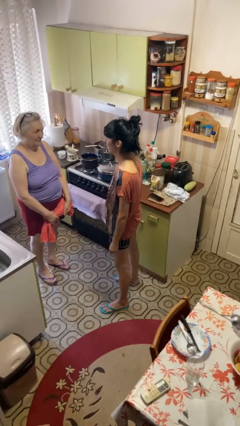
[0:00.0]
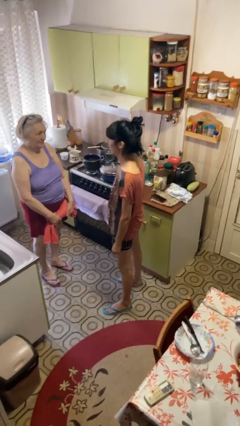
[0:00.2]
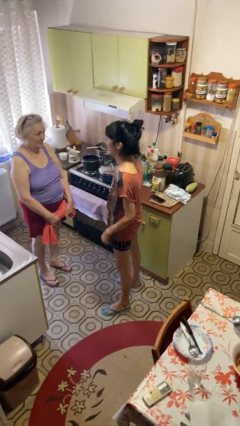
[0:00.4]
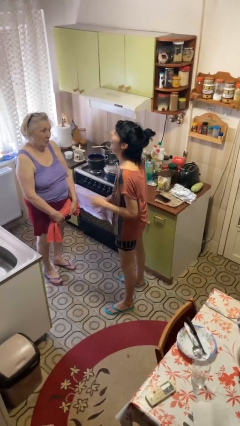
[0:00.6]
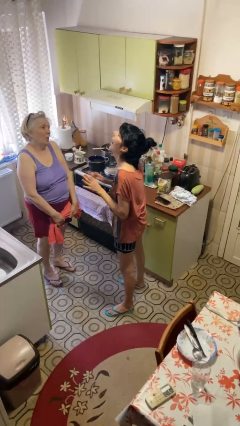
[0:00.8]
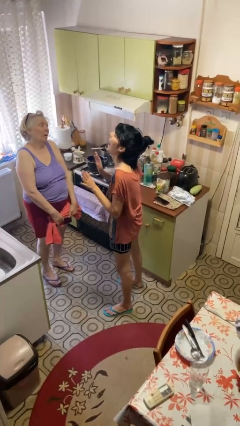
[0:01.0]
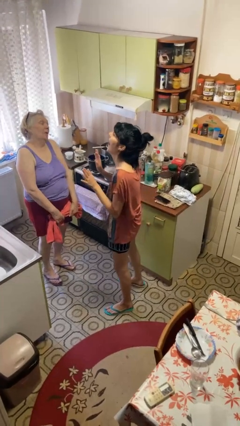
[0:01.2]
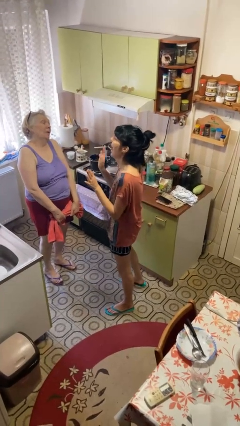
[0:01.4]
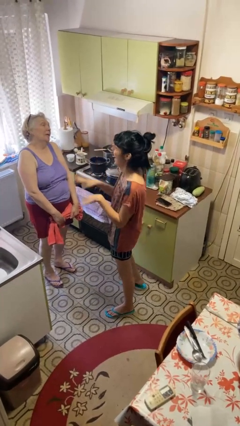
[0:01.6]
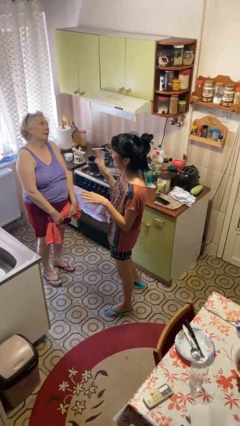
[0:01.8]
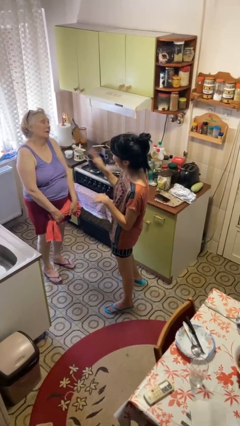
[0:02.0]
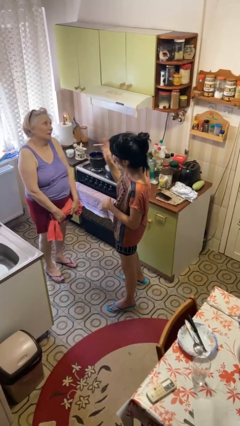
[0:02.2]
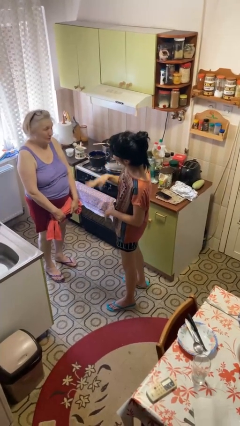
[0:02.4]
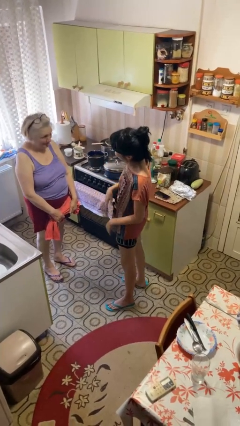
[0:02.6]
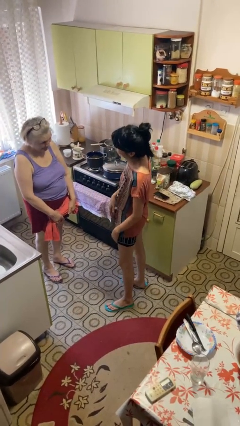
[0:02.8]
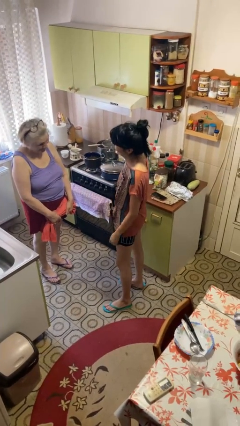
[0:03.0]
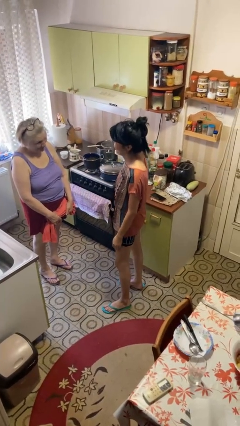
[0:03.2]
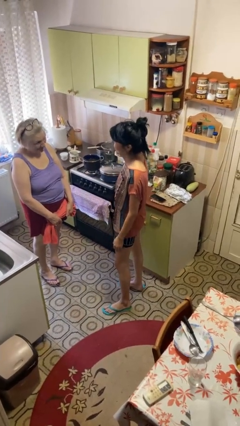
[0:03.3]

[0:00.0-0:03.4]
person laughs with person

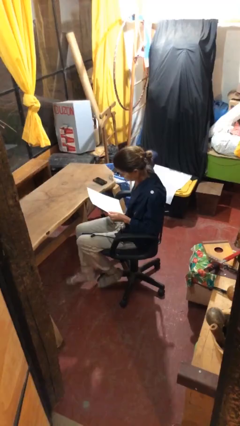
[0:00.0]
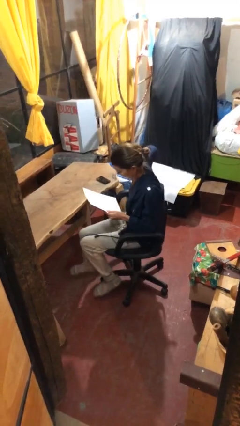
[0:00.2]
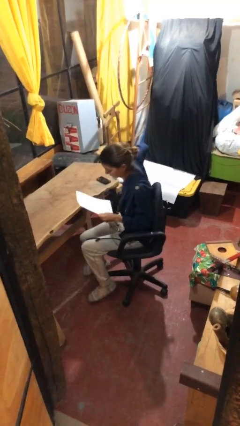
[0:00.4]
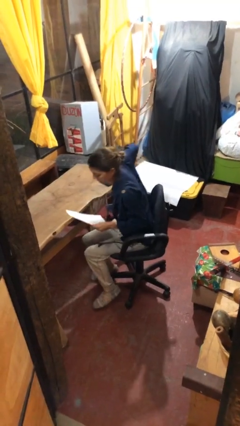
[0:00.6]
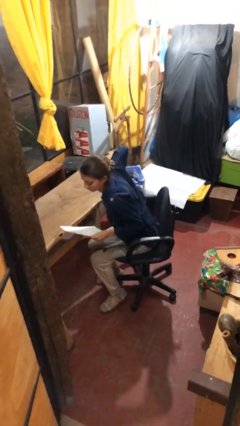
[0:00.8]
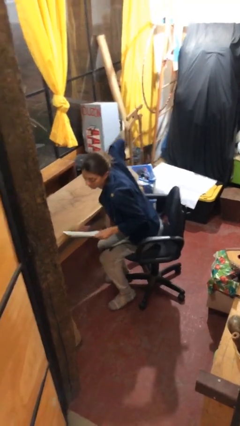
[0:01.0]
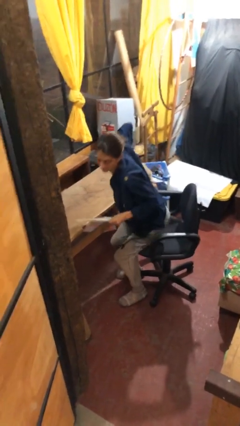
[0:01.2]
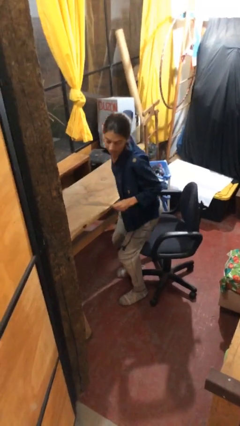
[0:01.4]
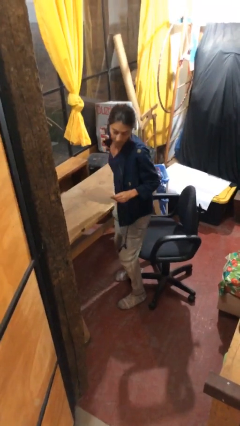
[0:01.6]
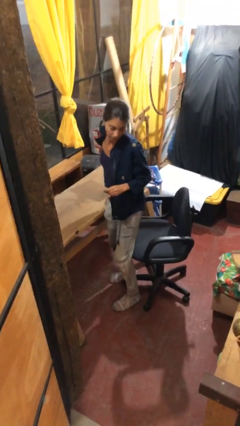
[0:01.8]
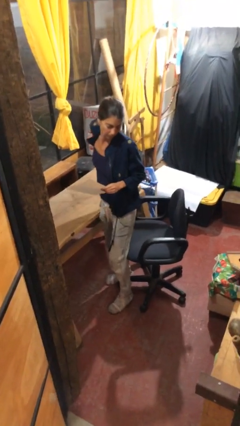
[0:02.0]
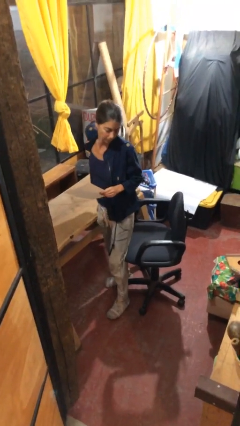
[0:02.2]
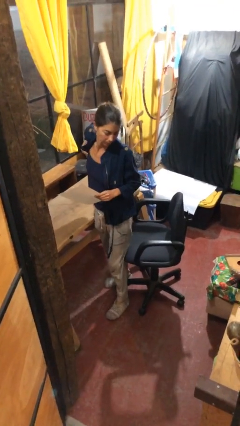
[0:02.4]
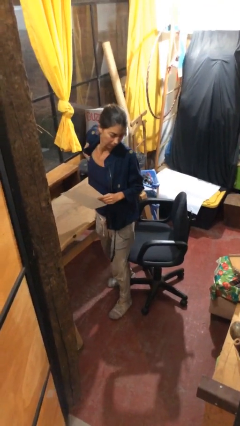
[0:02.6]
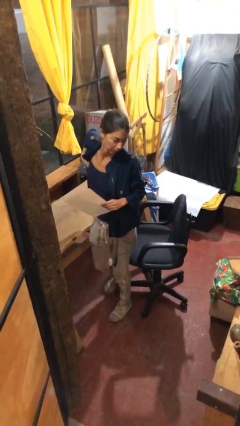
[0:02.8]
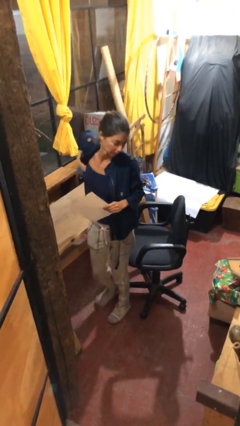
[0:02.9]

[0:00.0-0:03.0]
person stands up

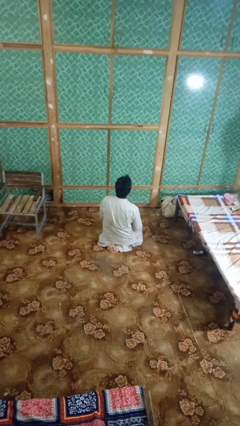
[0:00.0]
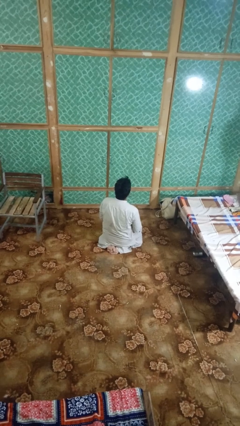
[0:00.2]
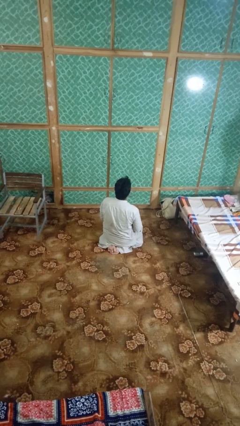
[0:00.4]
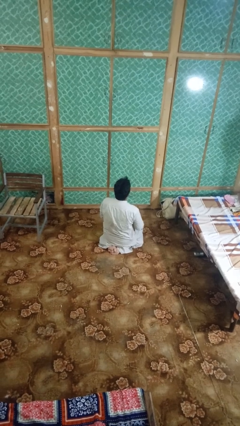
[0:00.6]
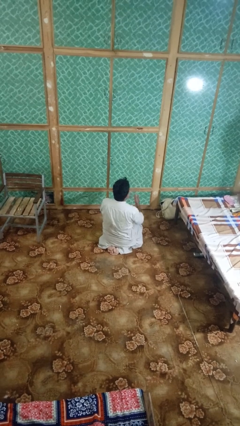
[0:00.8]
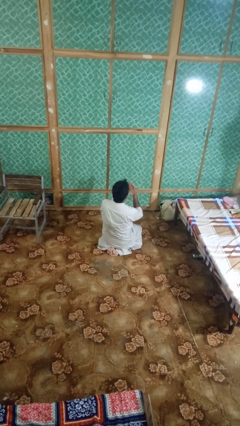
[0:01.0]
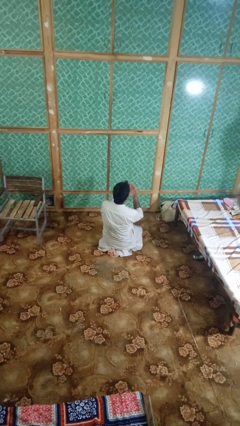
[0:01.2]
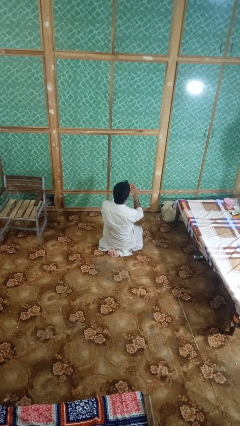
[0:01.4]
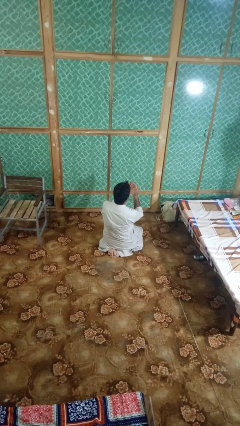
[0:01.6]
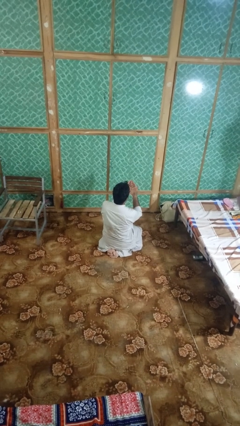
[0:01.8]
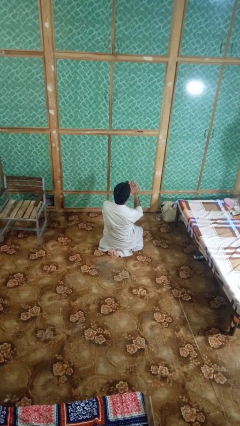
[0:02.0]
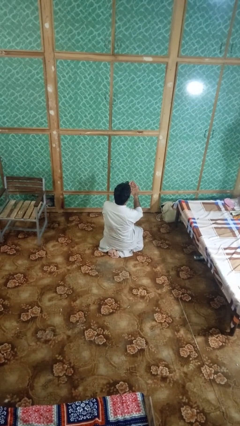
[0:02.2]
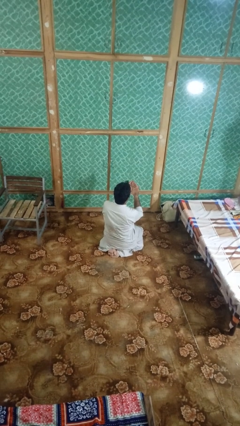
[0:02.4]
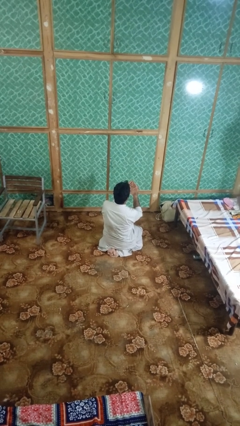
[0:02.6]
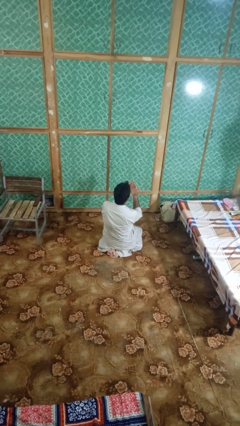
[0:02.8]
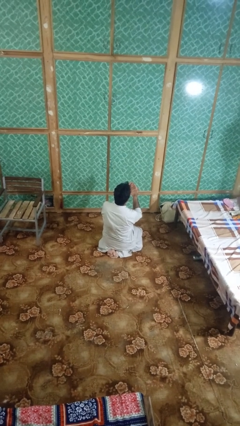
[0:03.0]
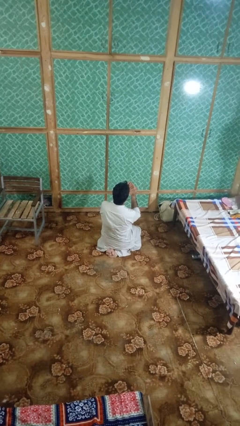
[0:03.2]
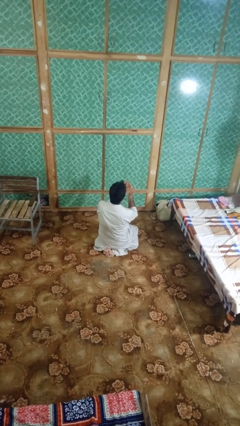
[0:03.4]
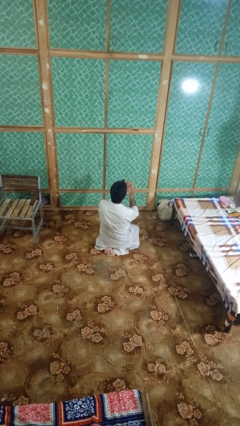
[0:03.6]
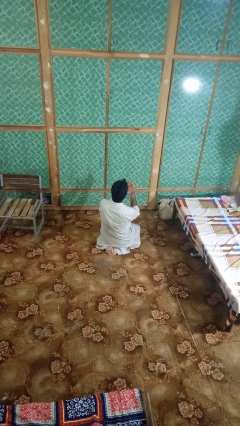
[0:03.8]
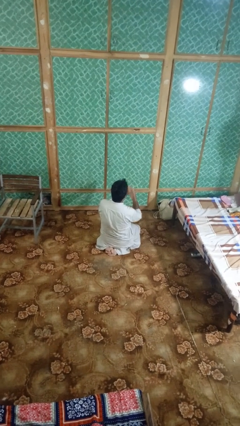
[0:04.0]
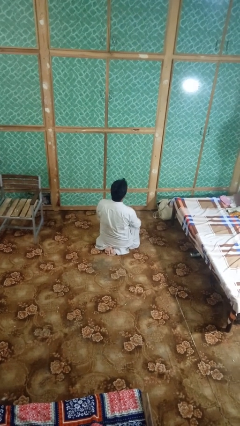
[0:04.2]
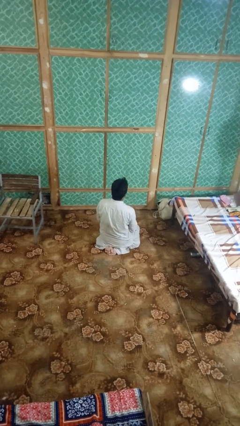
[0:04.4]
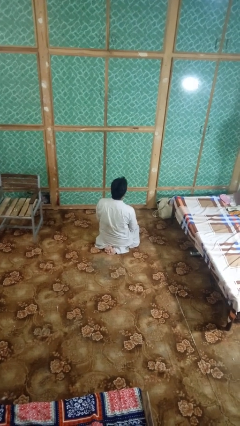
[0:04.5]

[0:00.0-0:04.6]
person prays

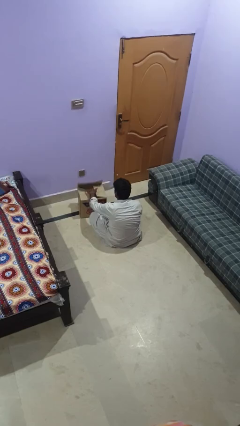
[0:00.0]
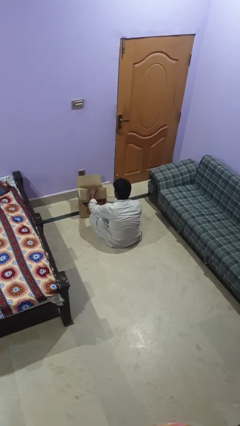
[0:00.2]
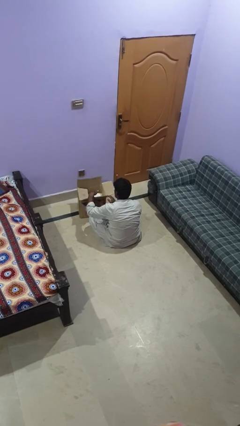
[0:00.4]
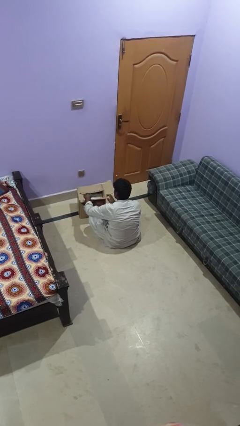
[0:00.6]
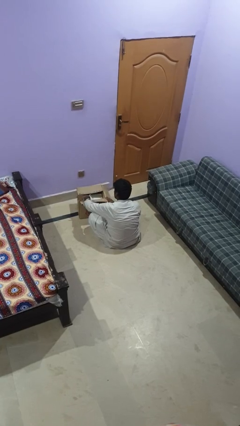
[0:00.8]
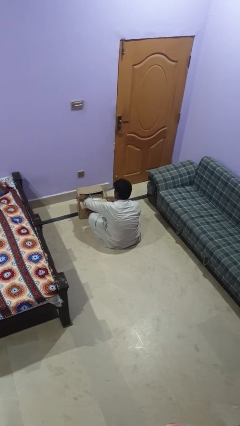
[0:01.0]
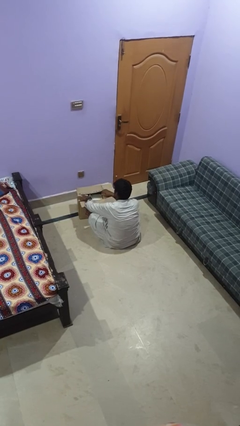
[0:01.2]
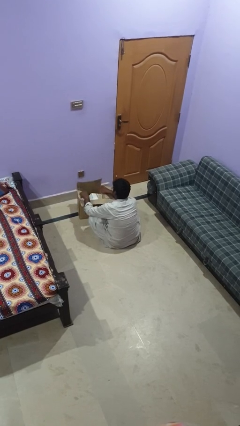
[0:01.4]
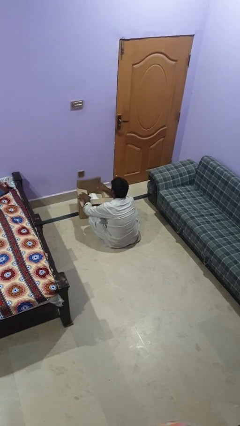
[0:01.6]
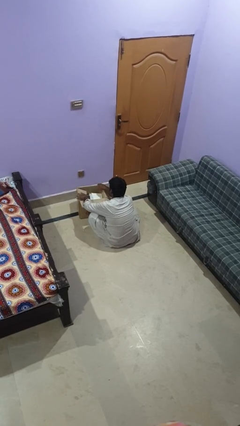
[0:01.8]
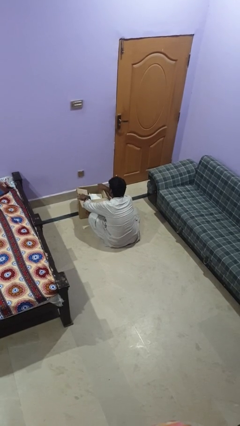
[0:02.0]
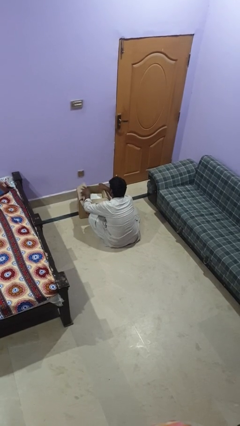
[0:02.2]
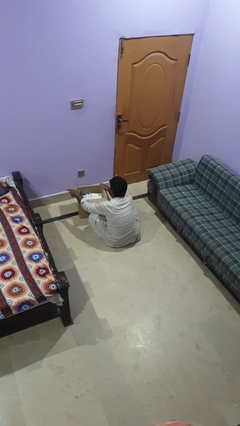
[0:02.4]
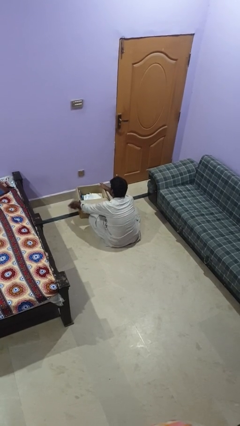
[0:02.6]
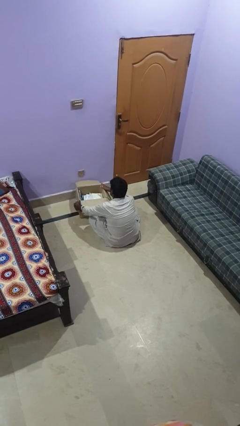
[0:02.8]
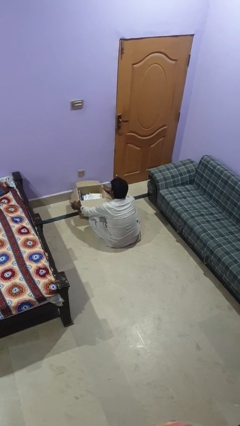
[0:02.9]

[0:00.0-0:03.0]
person opens box

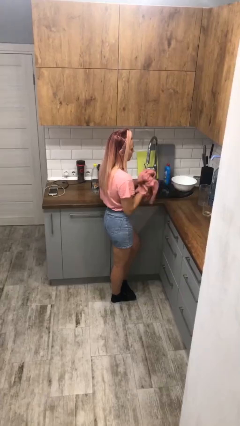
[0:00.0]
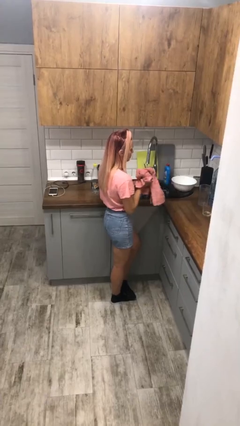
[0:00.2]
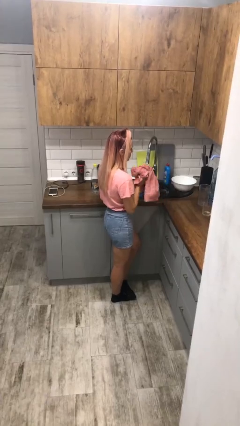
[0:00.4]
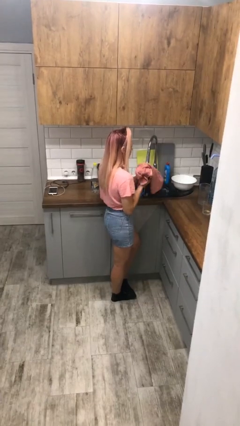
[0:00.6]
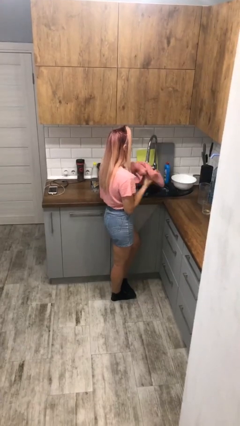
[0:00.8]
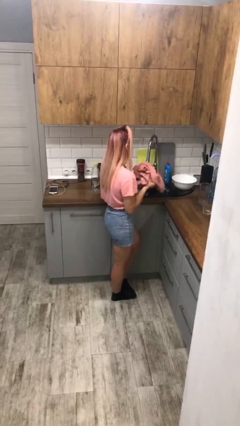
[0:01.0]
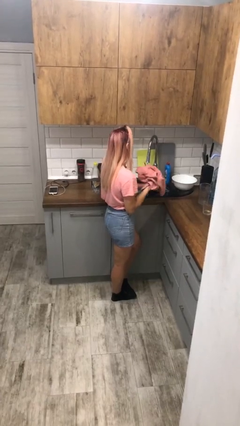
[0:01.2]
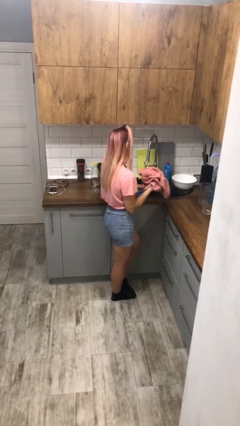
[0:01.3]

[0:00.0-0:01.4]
person dries hands with towel

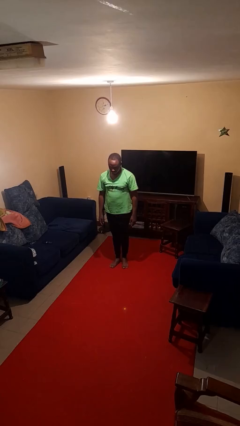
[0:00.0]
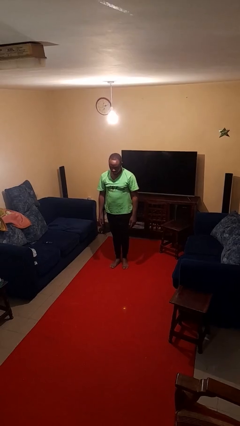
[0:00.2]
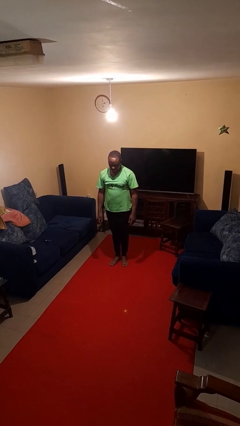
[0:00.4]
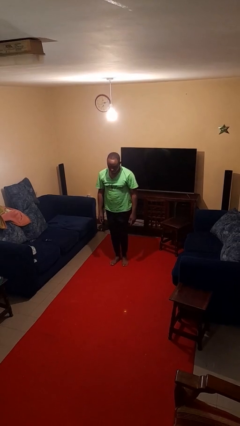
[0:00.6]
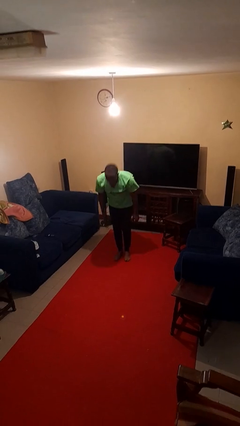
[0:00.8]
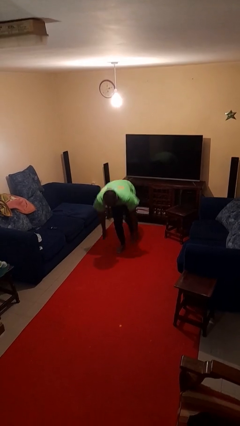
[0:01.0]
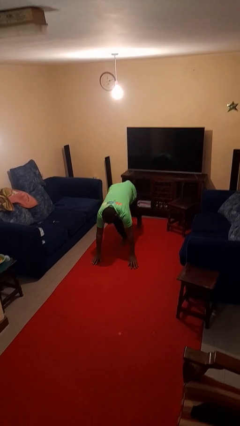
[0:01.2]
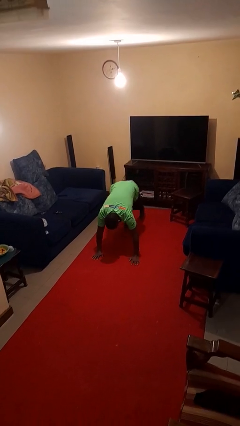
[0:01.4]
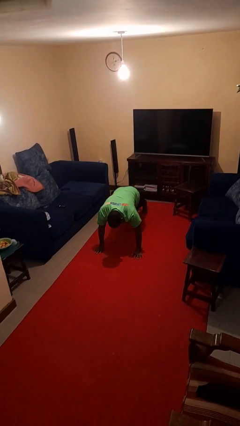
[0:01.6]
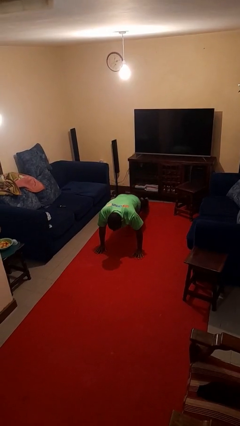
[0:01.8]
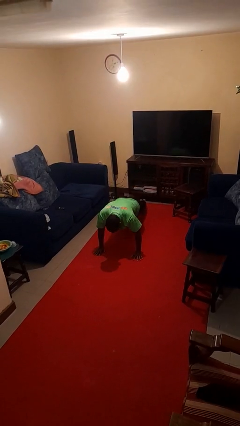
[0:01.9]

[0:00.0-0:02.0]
person exercises with plank
